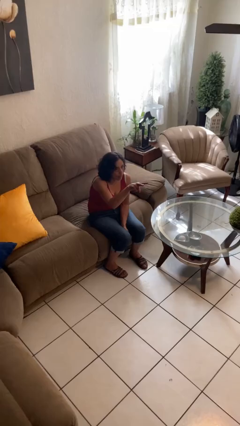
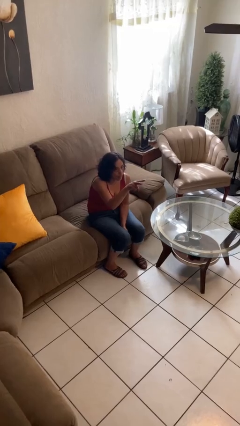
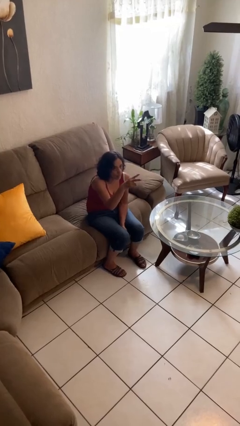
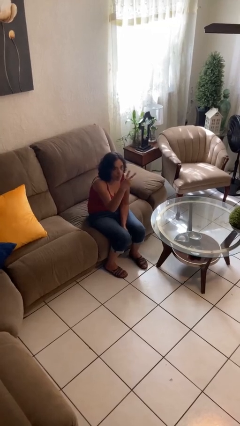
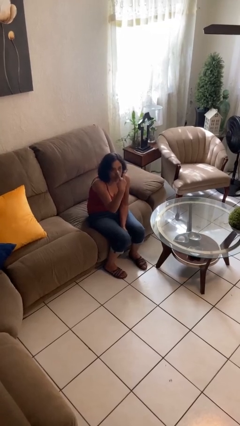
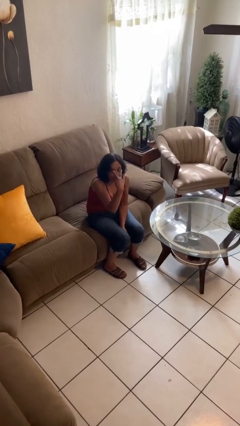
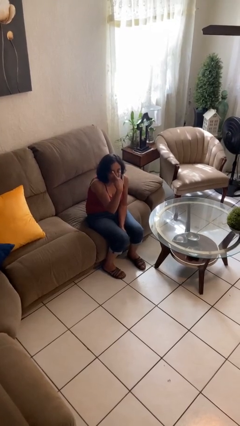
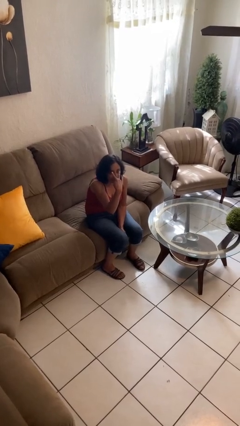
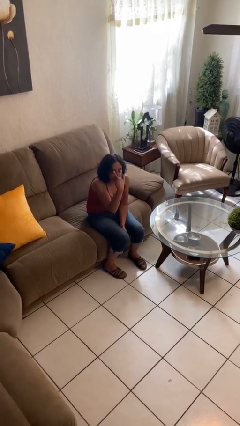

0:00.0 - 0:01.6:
person gestures watch closely

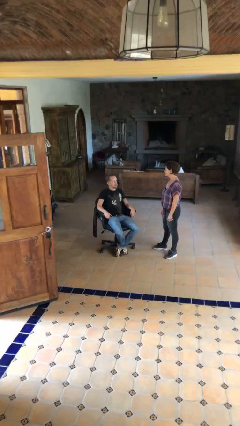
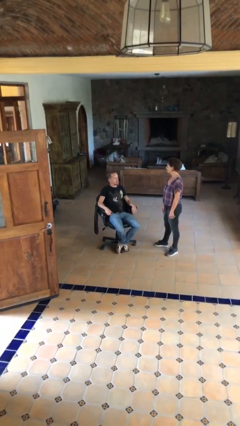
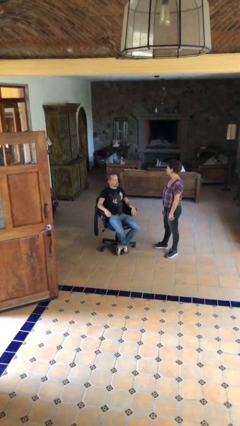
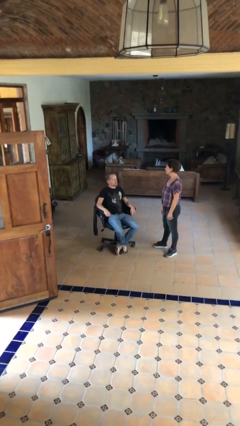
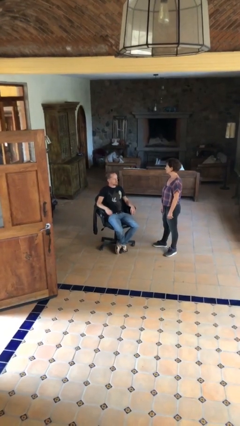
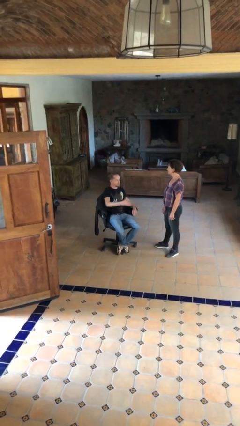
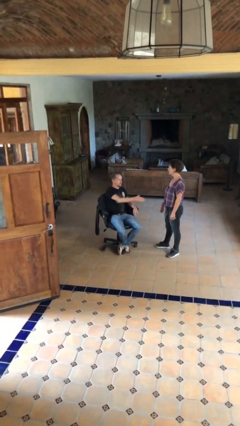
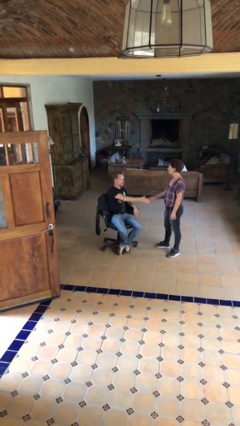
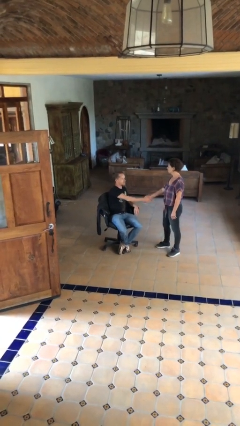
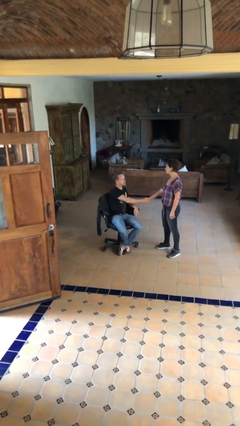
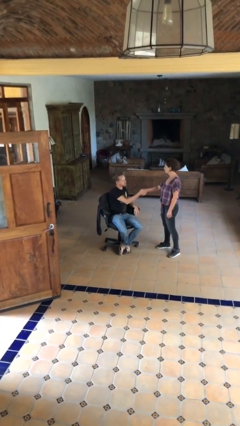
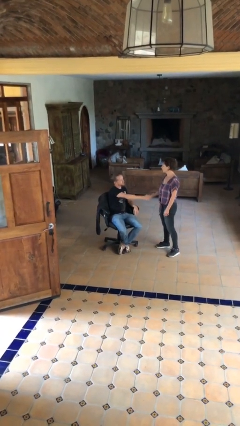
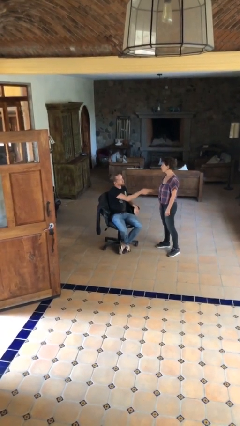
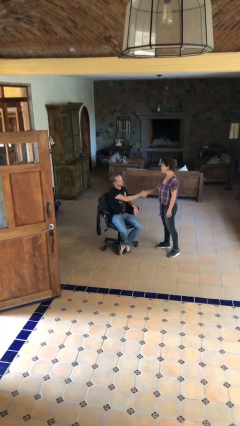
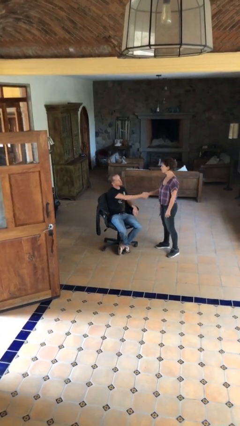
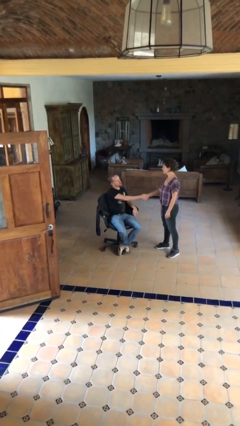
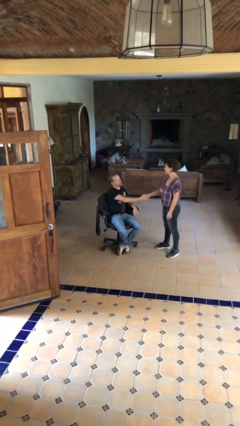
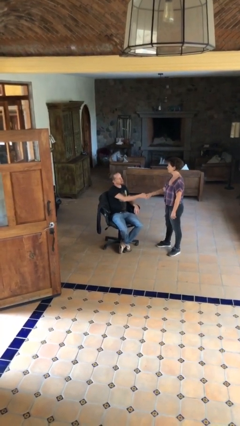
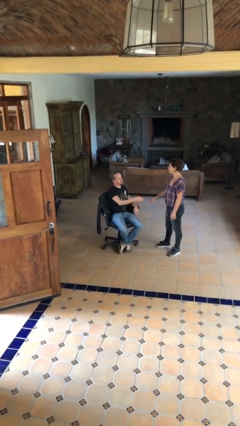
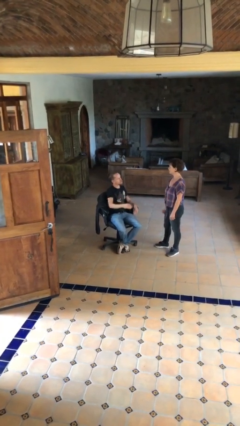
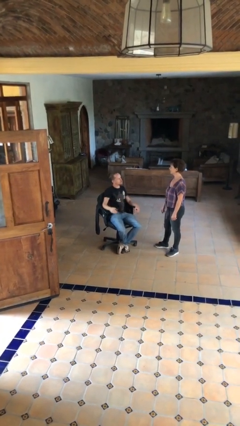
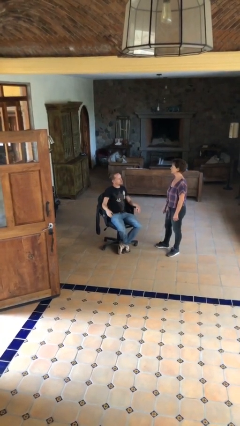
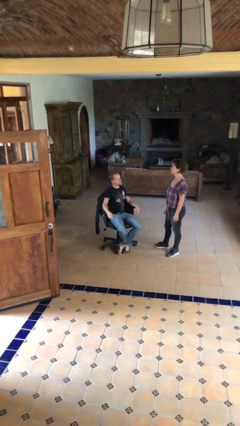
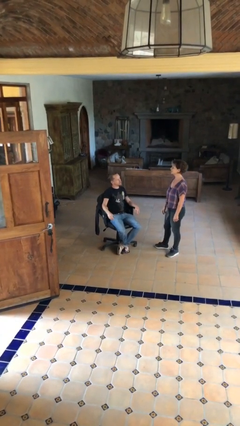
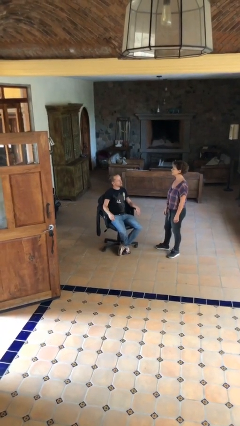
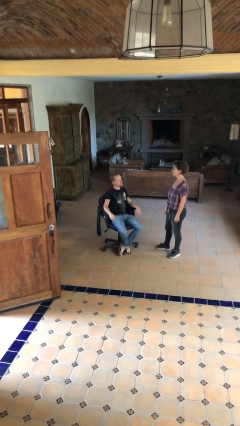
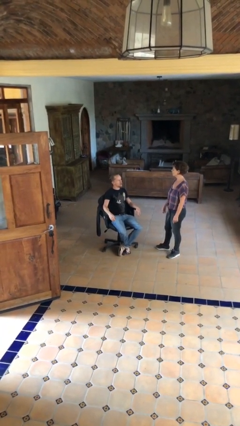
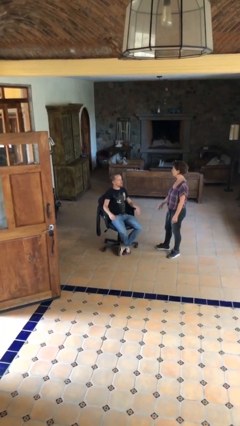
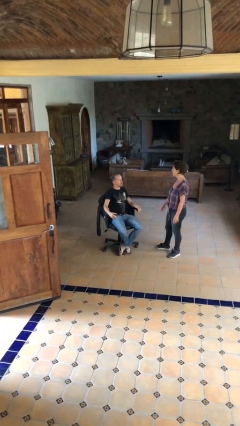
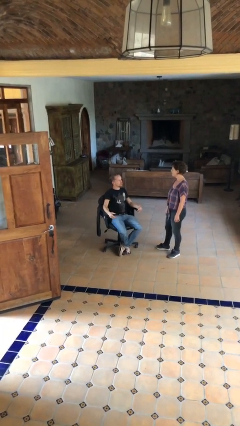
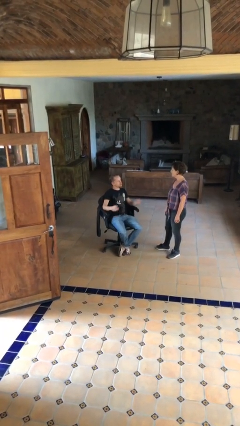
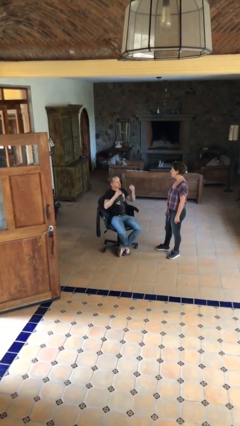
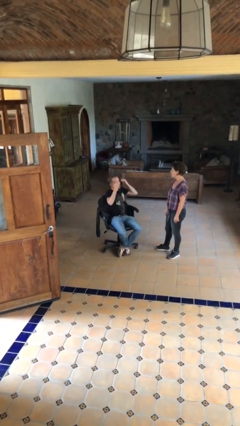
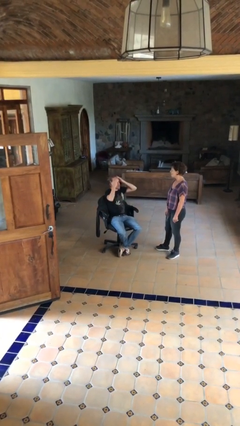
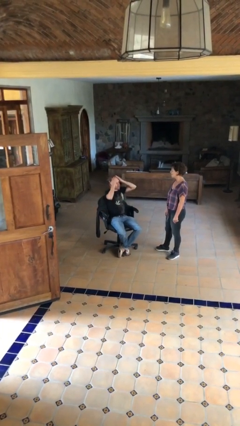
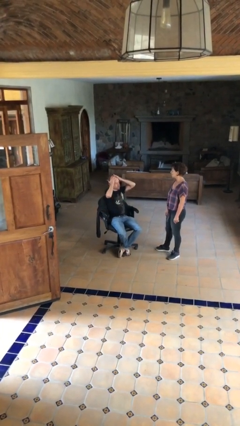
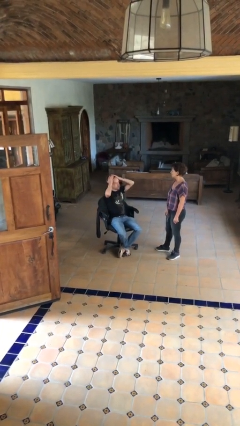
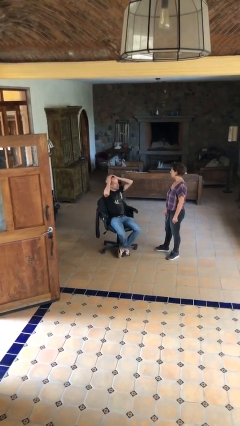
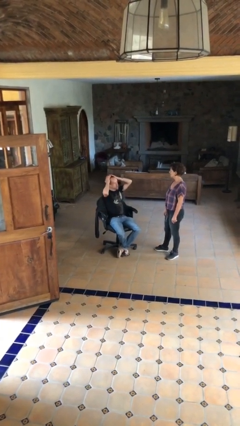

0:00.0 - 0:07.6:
person shakes hand

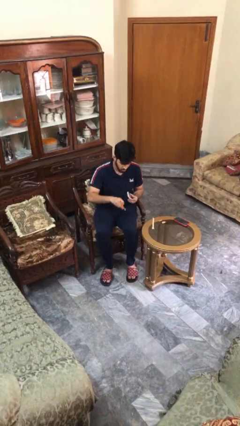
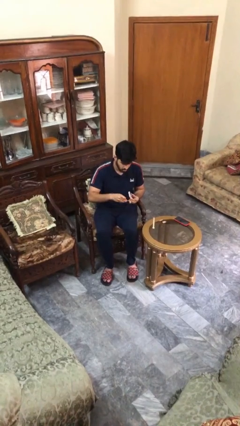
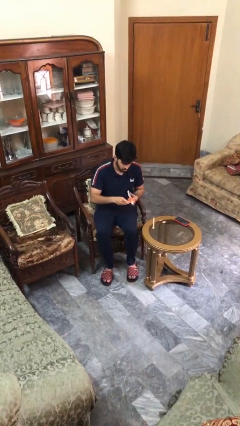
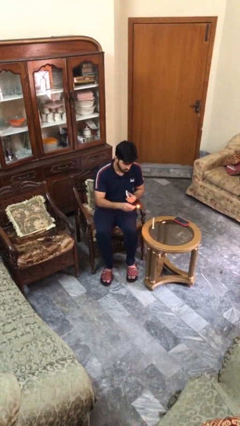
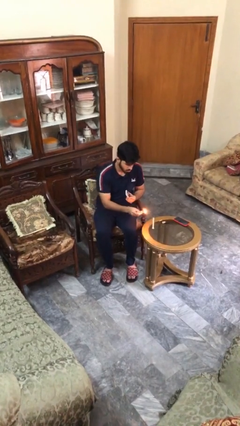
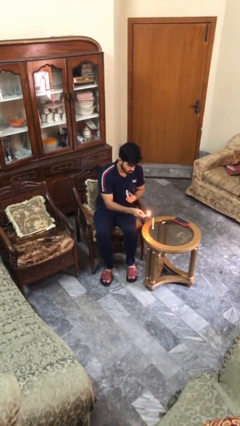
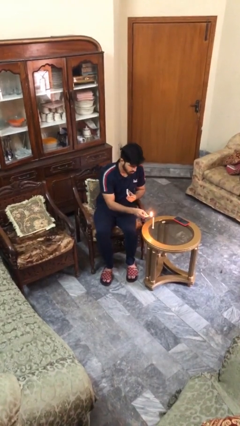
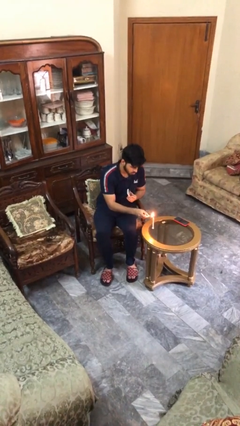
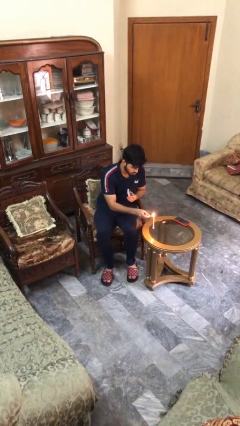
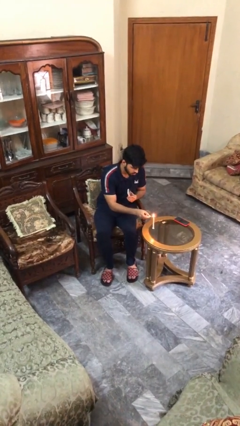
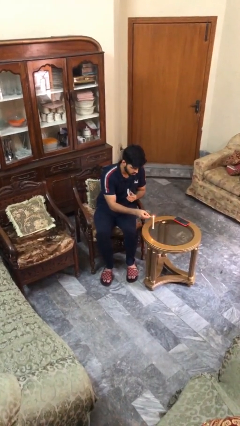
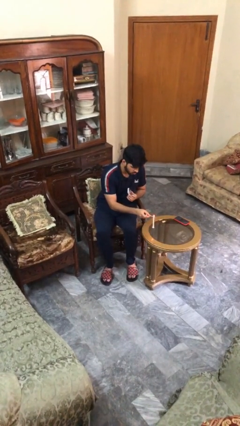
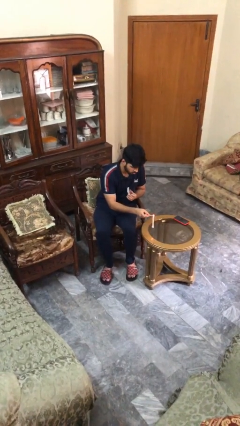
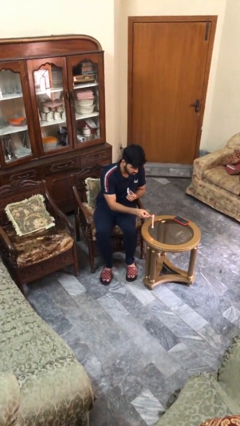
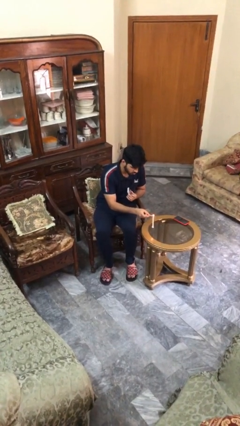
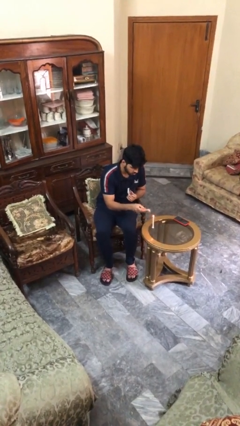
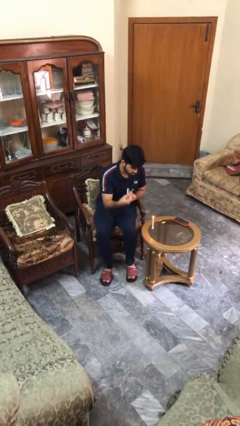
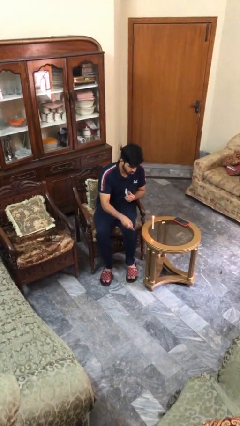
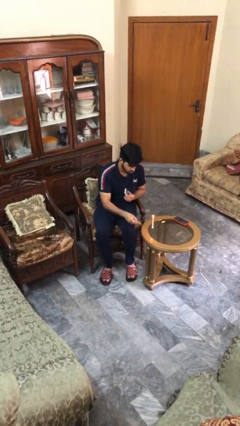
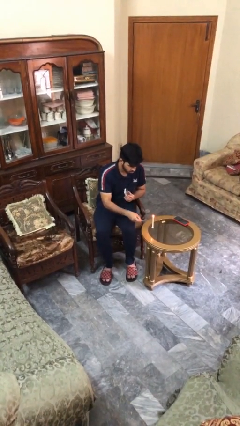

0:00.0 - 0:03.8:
person lights candle

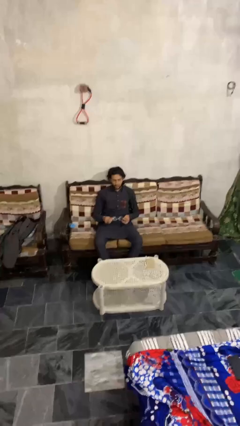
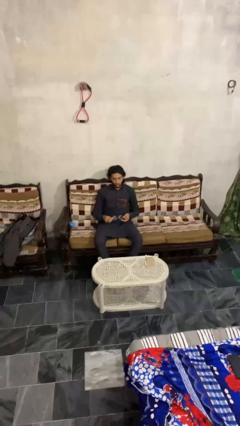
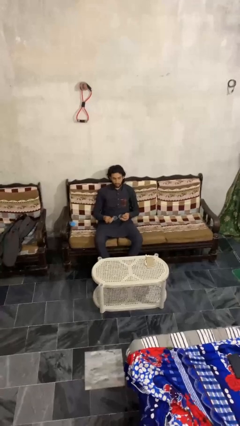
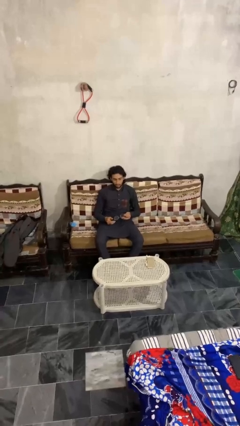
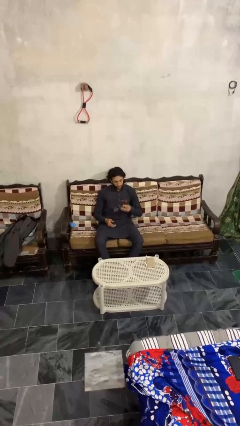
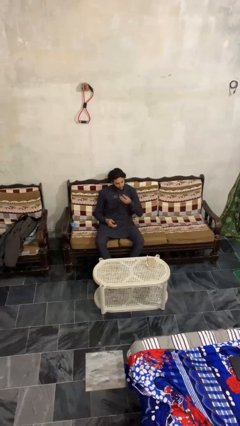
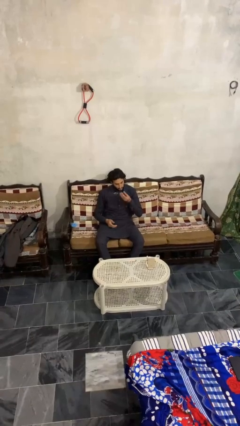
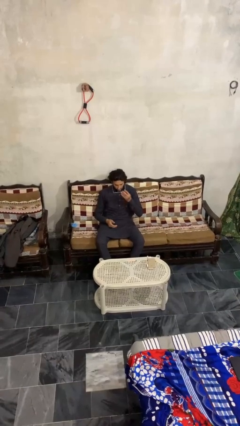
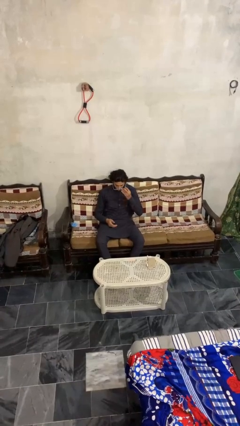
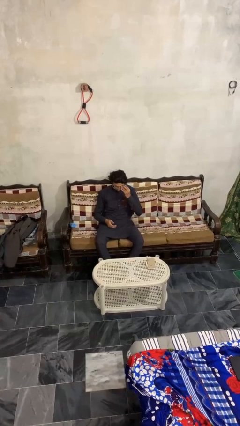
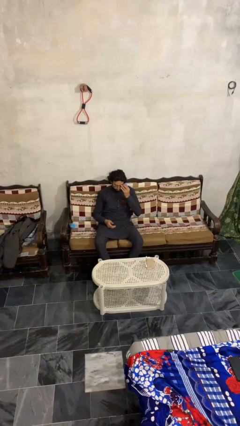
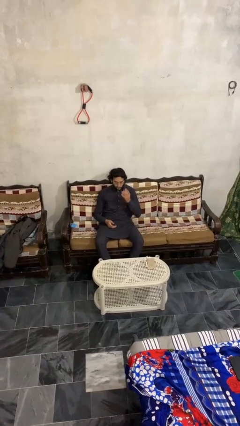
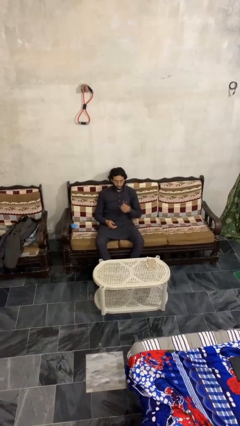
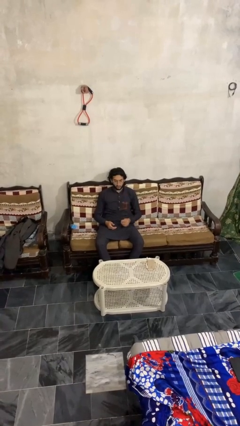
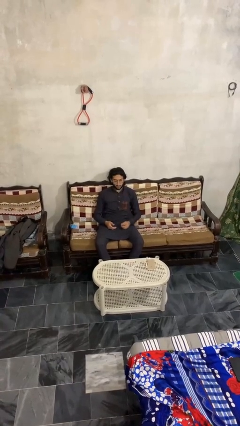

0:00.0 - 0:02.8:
person puts on glasses

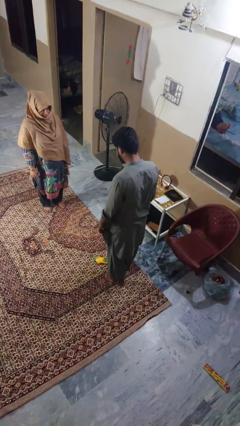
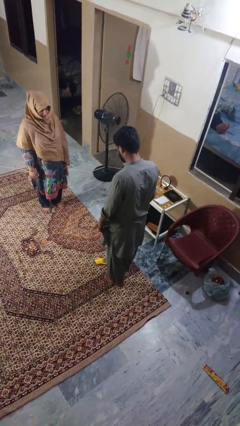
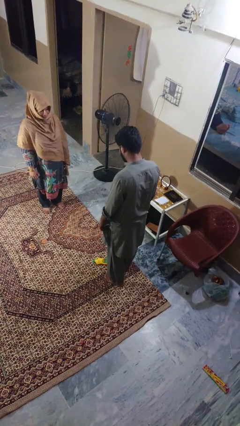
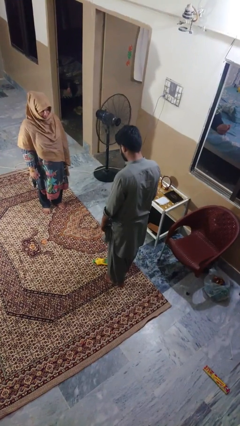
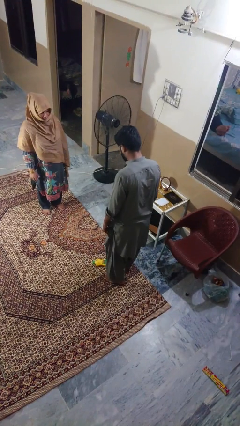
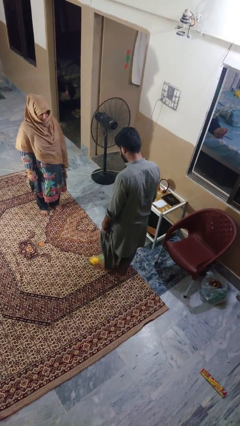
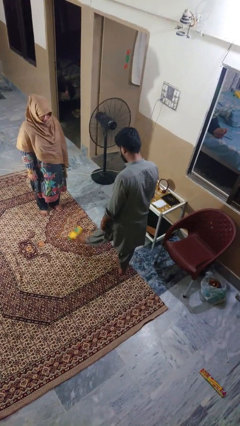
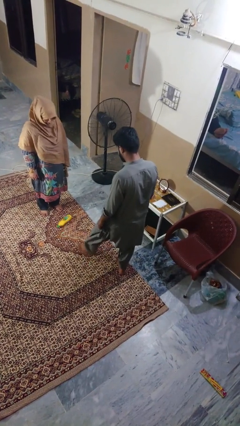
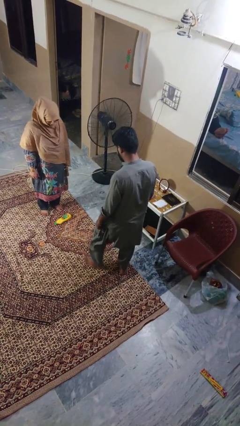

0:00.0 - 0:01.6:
person kicks object to person
